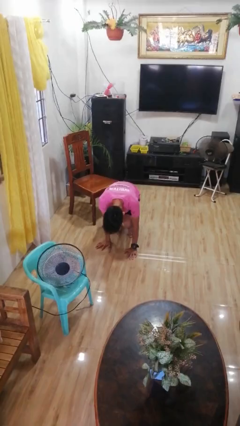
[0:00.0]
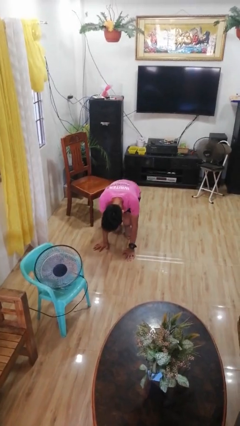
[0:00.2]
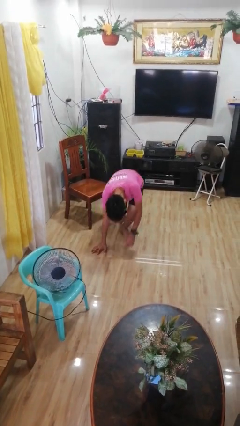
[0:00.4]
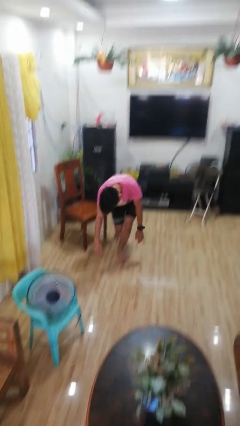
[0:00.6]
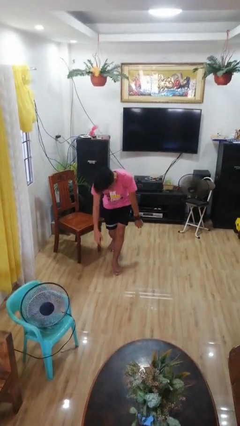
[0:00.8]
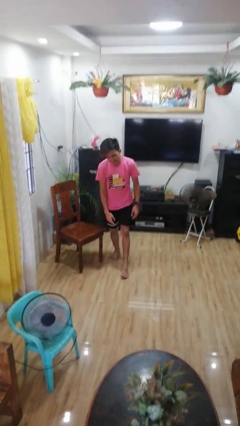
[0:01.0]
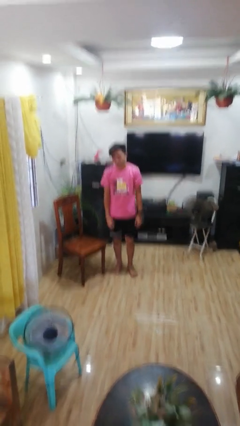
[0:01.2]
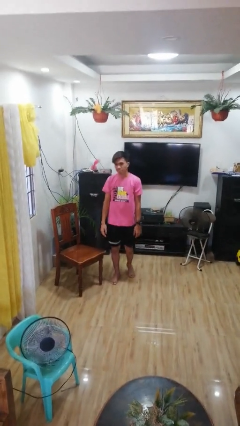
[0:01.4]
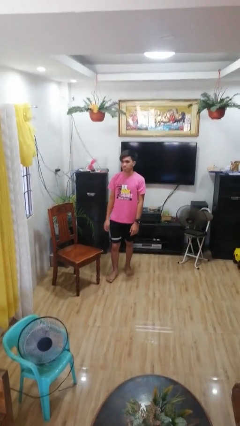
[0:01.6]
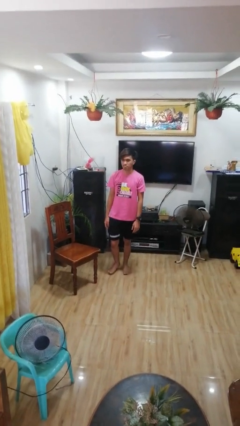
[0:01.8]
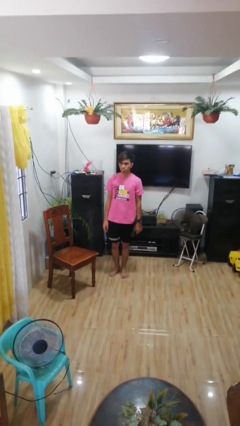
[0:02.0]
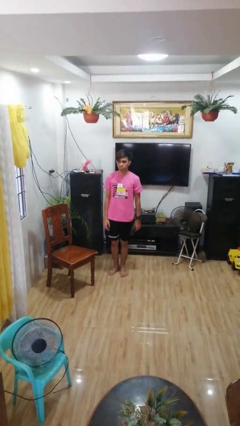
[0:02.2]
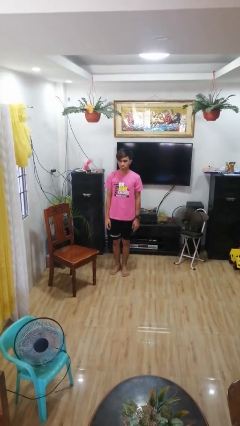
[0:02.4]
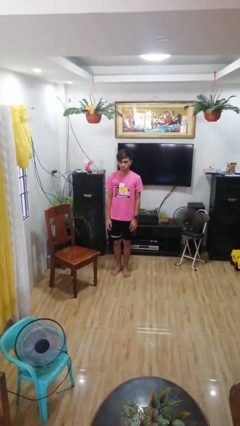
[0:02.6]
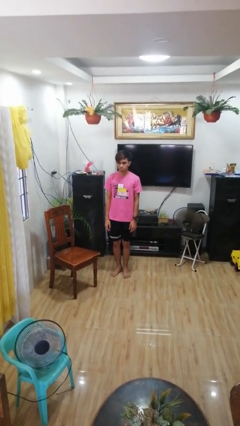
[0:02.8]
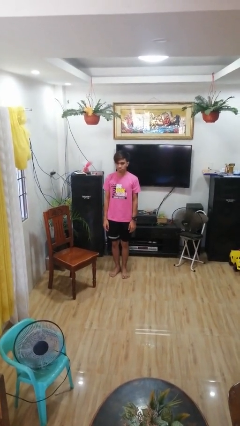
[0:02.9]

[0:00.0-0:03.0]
person stands up from floor

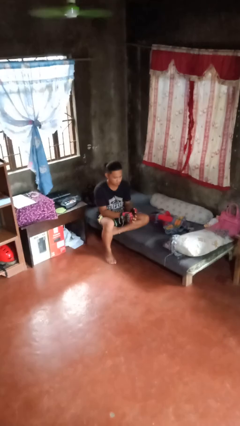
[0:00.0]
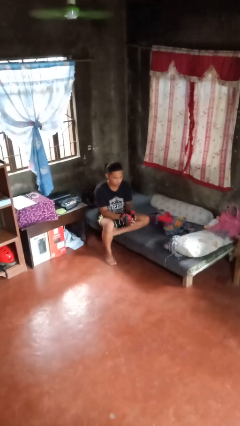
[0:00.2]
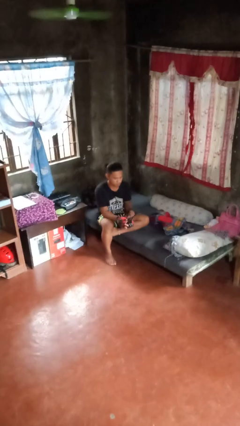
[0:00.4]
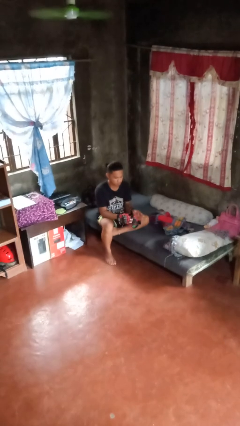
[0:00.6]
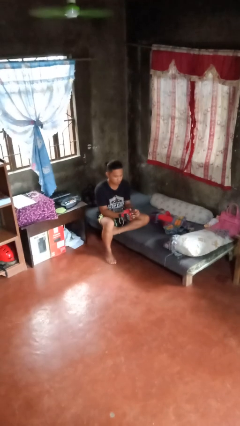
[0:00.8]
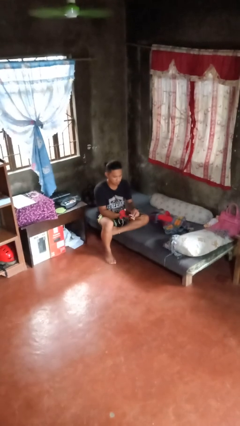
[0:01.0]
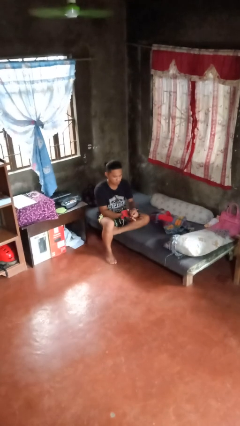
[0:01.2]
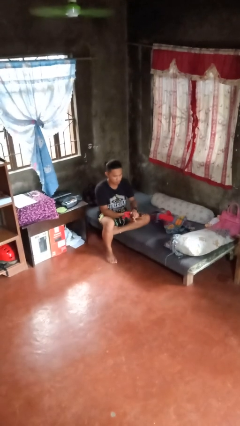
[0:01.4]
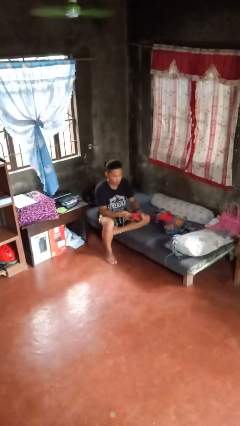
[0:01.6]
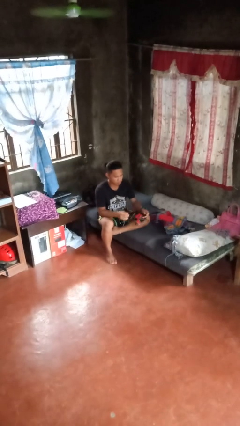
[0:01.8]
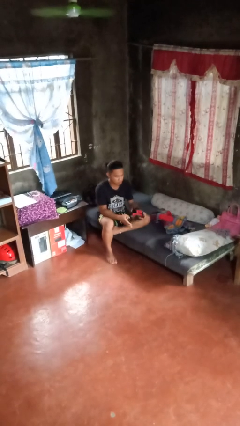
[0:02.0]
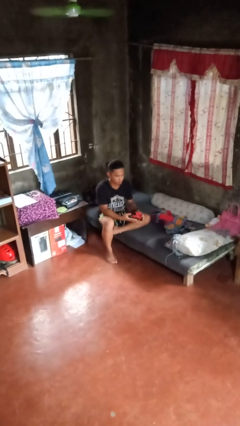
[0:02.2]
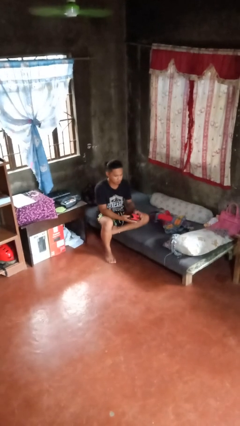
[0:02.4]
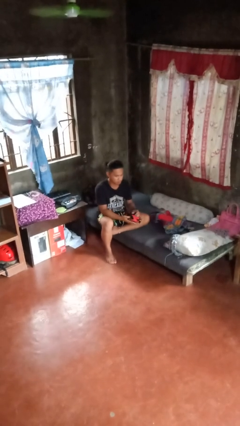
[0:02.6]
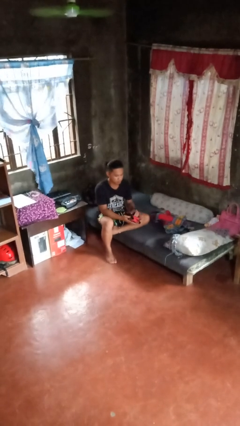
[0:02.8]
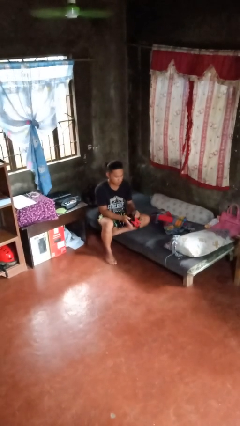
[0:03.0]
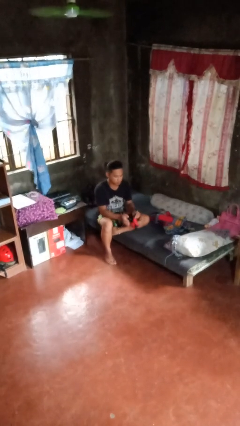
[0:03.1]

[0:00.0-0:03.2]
person takes off gloves

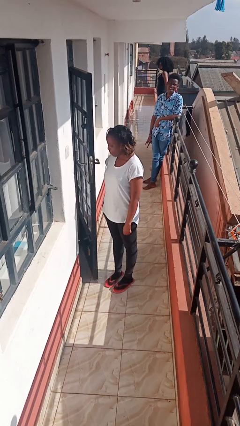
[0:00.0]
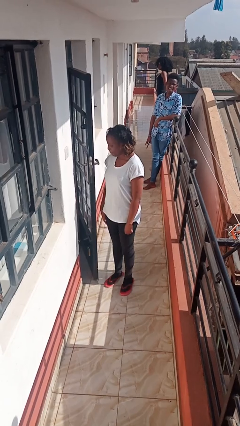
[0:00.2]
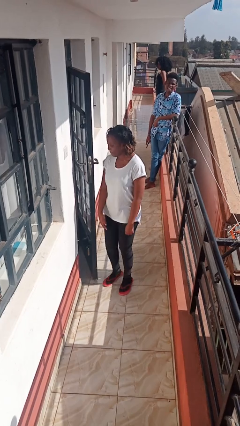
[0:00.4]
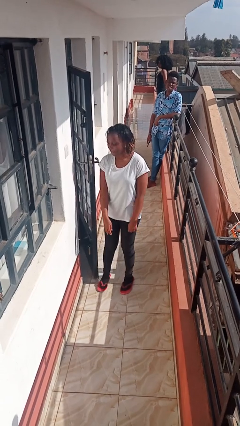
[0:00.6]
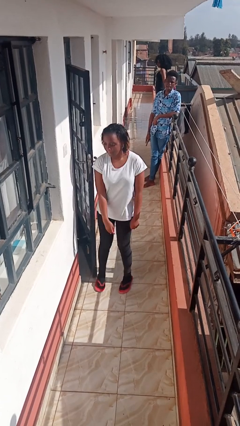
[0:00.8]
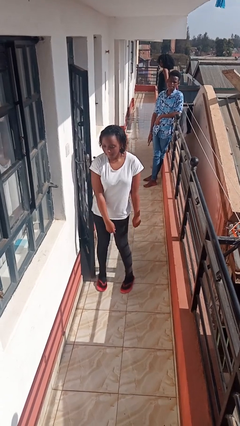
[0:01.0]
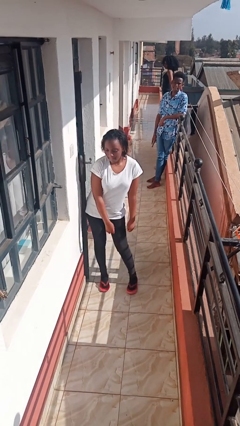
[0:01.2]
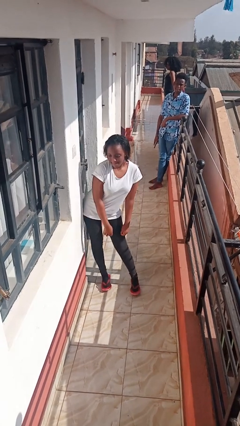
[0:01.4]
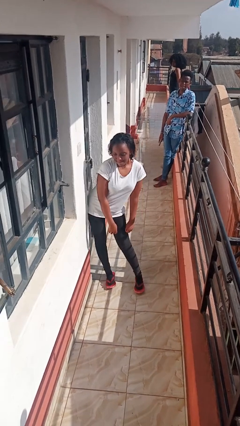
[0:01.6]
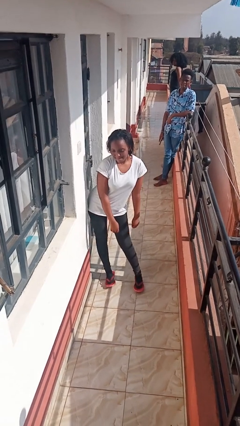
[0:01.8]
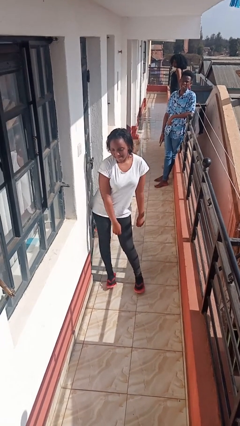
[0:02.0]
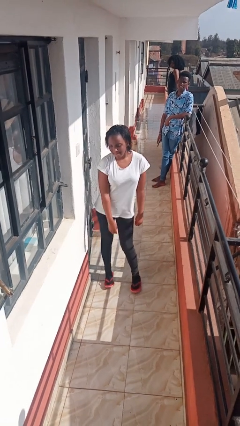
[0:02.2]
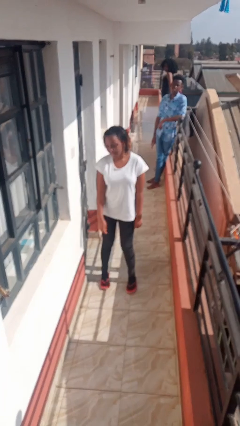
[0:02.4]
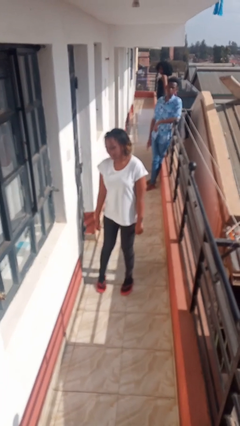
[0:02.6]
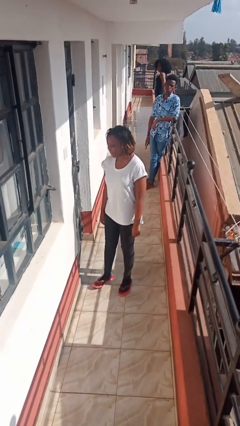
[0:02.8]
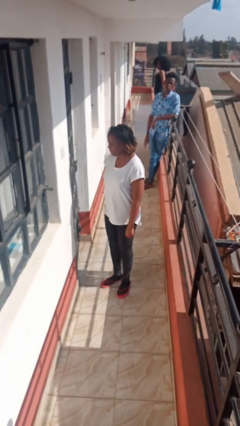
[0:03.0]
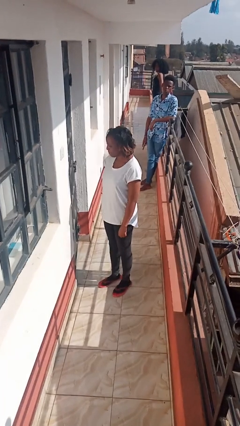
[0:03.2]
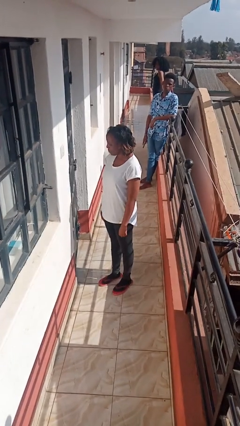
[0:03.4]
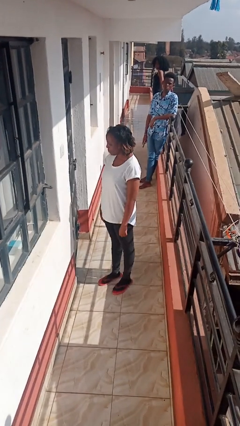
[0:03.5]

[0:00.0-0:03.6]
person closes door with hip

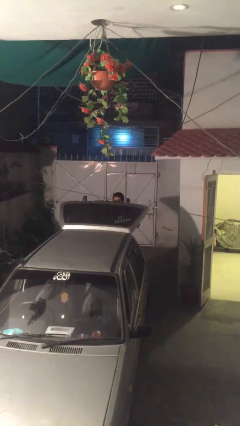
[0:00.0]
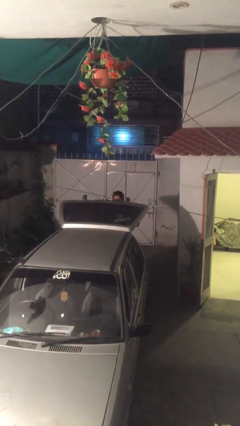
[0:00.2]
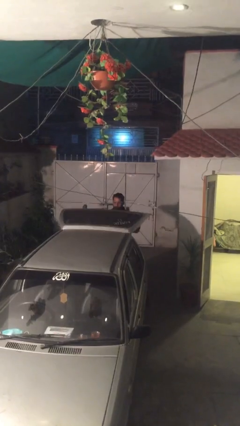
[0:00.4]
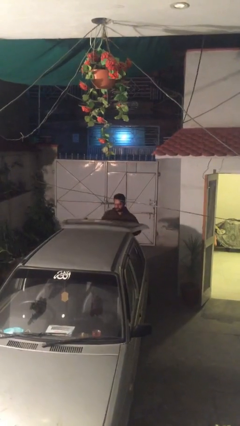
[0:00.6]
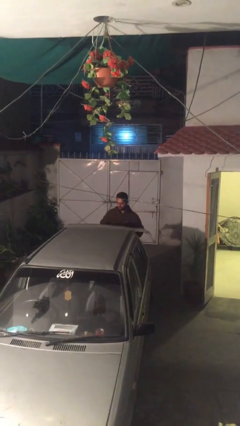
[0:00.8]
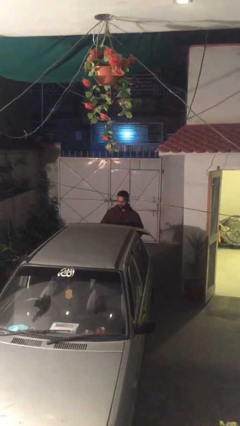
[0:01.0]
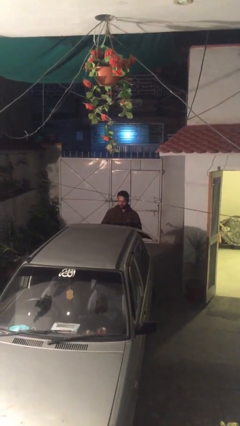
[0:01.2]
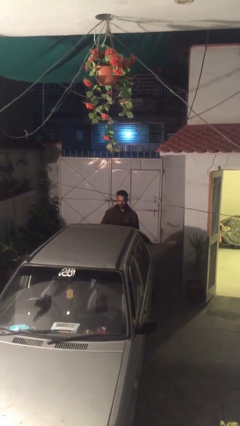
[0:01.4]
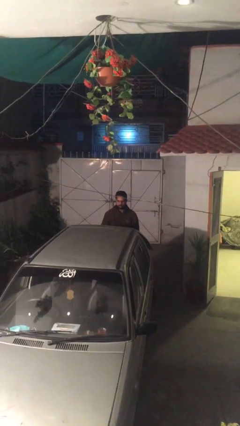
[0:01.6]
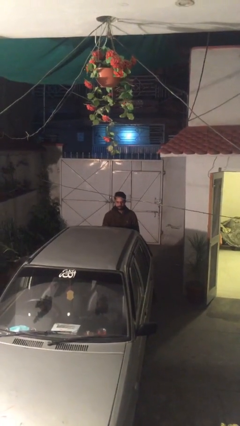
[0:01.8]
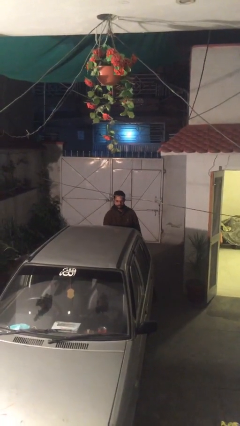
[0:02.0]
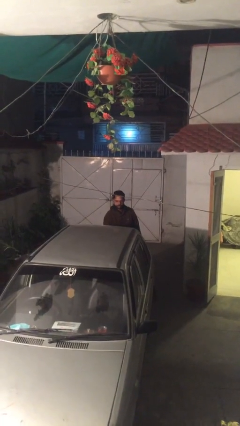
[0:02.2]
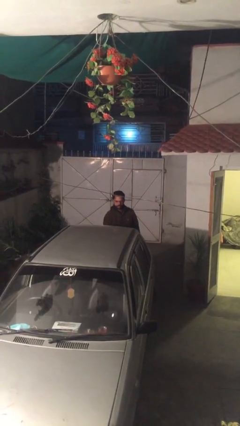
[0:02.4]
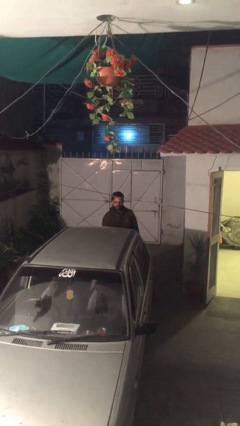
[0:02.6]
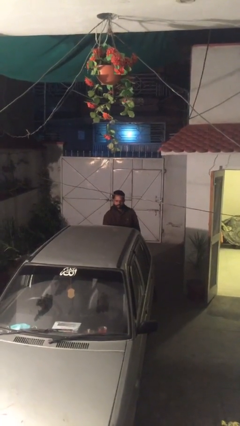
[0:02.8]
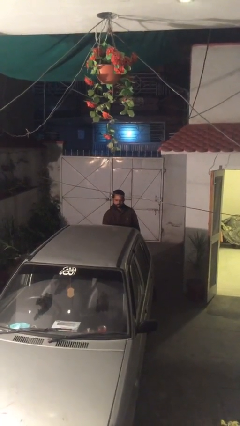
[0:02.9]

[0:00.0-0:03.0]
person closes car trunk

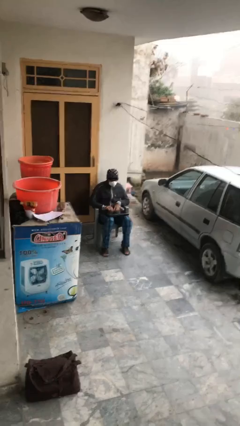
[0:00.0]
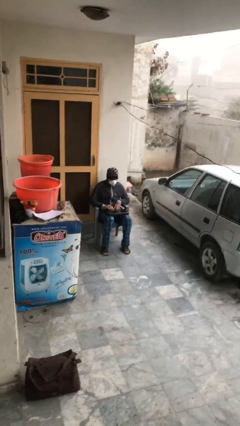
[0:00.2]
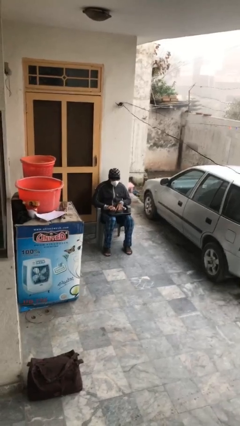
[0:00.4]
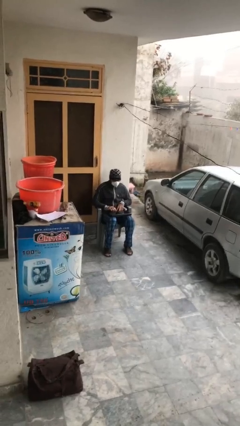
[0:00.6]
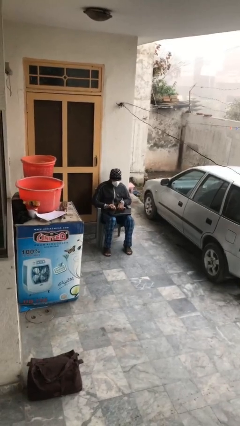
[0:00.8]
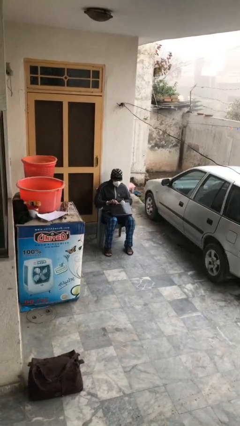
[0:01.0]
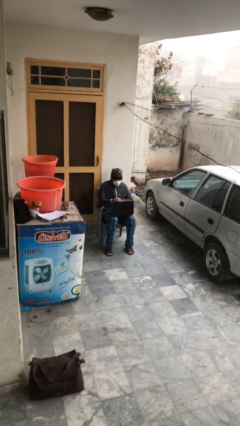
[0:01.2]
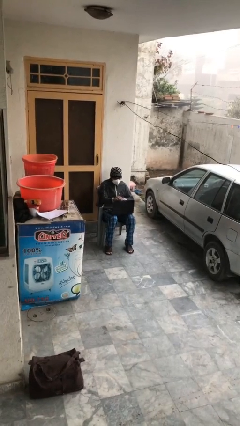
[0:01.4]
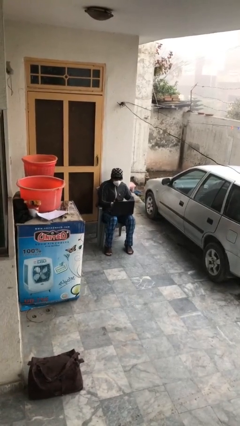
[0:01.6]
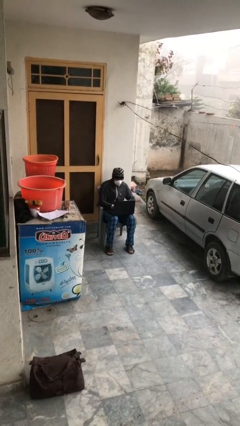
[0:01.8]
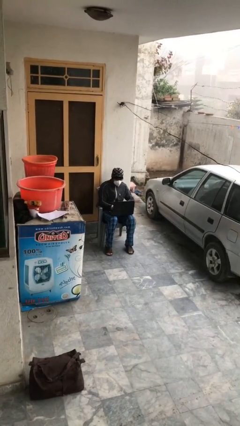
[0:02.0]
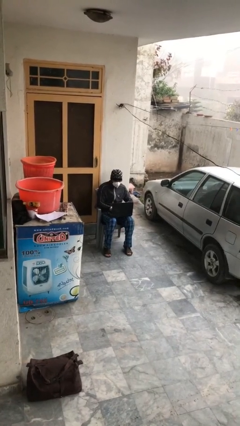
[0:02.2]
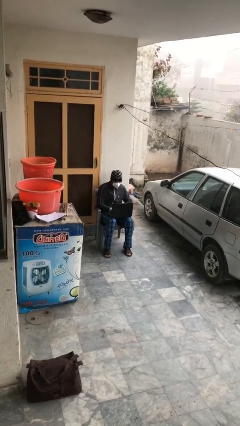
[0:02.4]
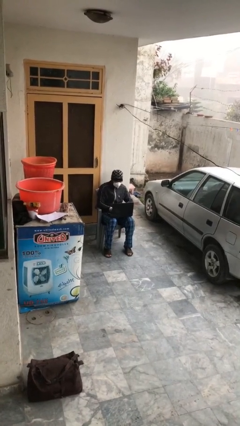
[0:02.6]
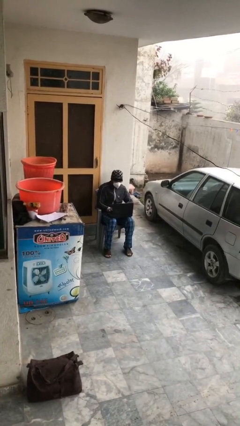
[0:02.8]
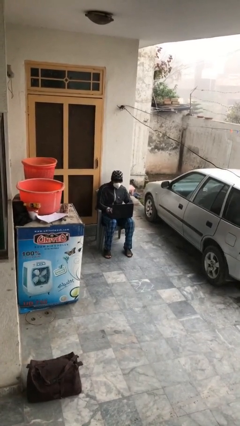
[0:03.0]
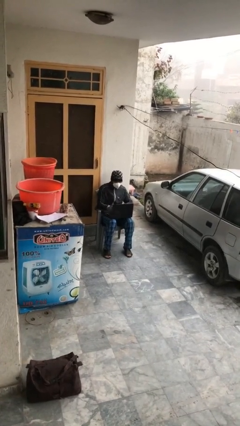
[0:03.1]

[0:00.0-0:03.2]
person interacts with laptop

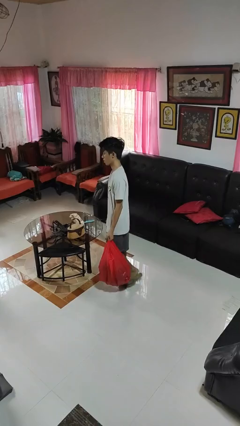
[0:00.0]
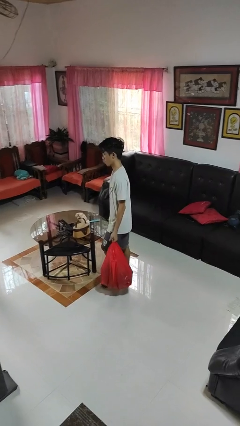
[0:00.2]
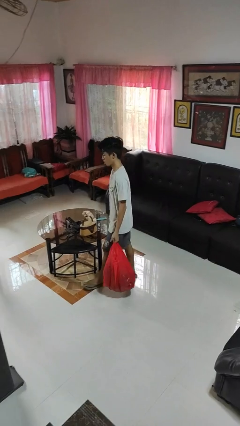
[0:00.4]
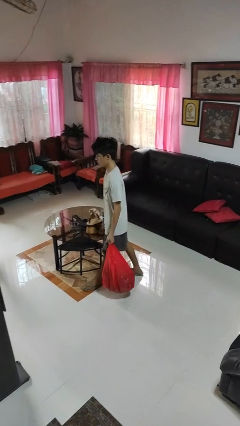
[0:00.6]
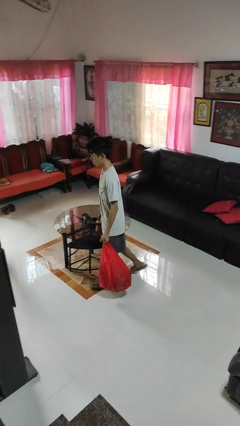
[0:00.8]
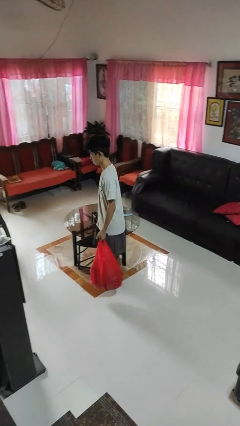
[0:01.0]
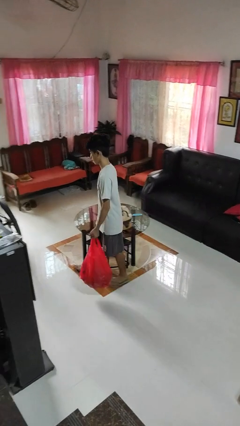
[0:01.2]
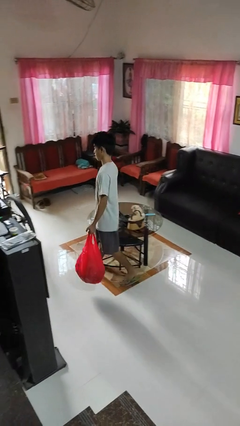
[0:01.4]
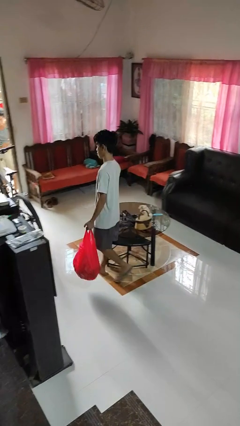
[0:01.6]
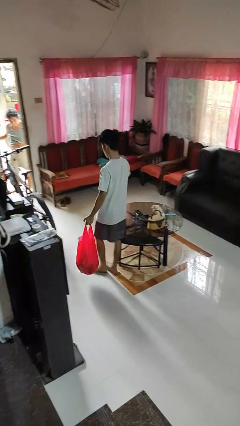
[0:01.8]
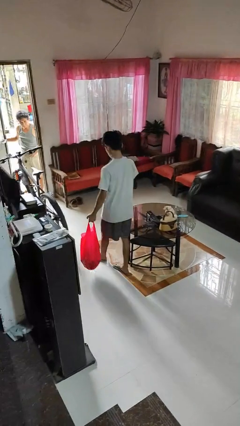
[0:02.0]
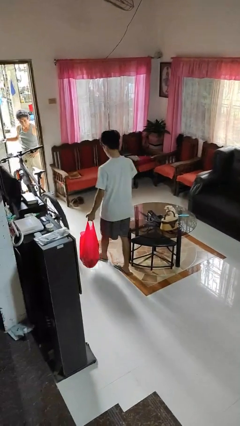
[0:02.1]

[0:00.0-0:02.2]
person carries groceries
